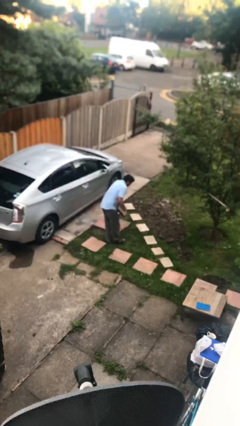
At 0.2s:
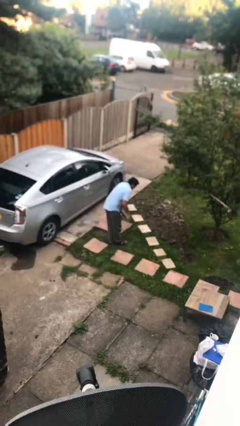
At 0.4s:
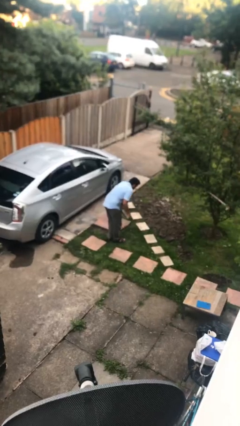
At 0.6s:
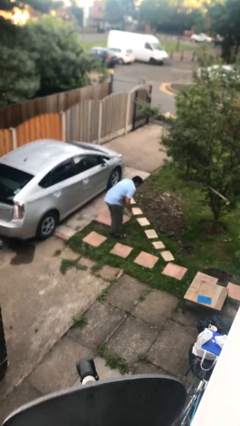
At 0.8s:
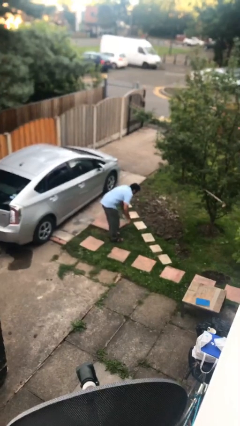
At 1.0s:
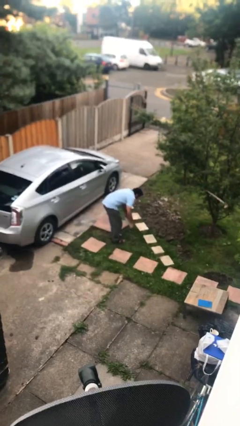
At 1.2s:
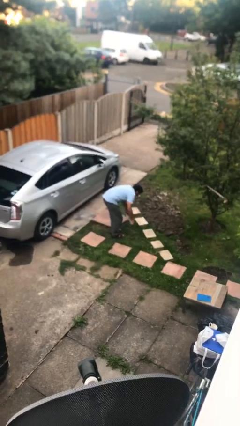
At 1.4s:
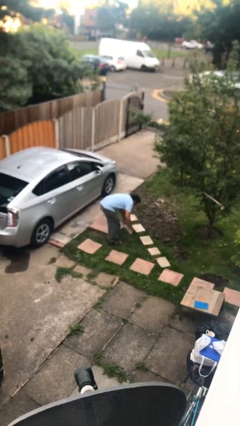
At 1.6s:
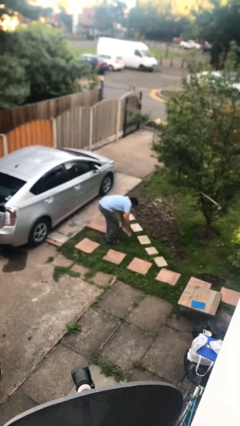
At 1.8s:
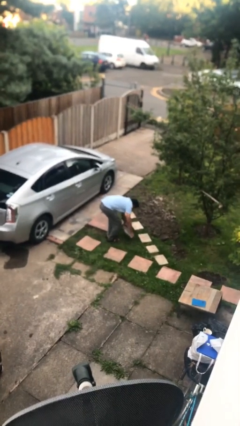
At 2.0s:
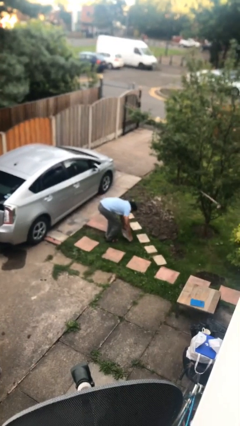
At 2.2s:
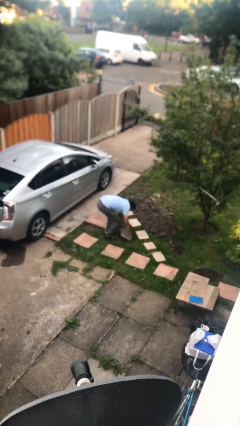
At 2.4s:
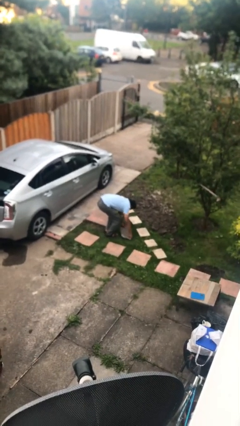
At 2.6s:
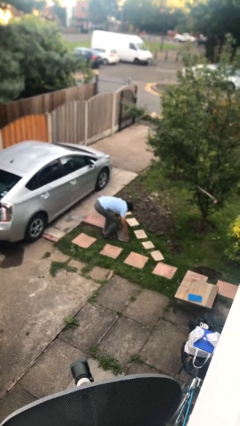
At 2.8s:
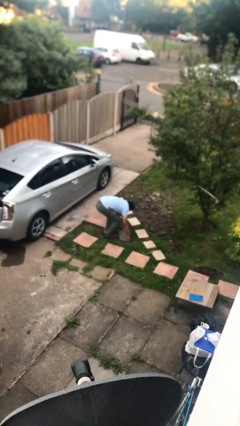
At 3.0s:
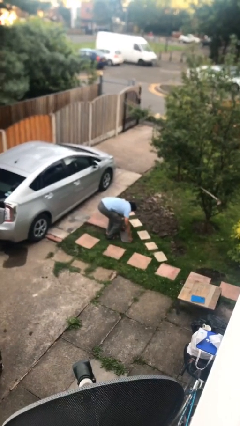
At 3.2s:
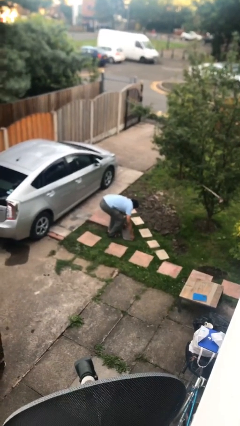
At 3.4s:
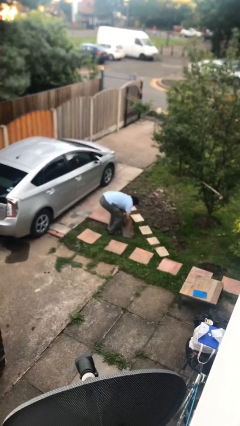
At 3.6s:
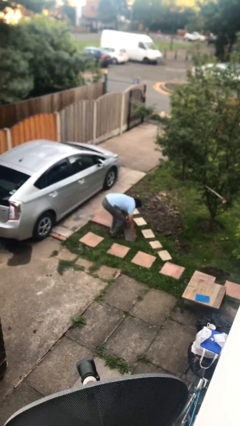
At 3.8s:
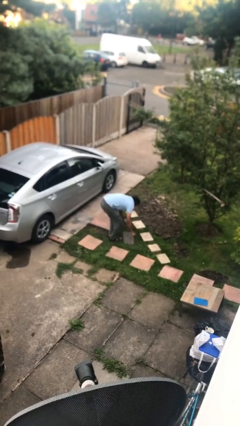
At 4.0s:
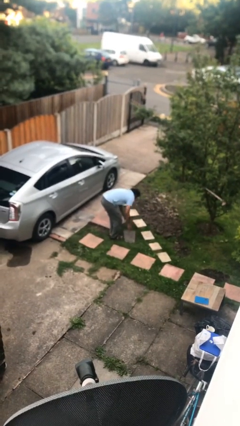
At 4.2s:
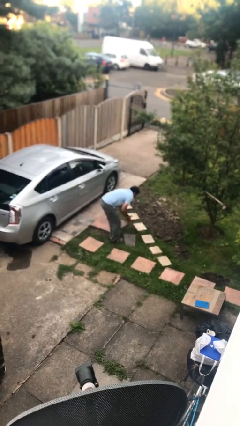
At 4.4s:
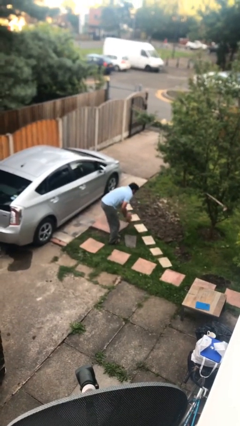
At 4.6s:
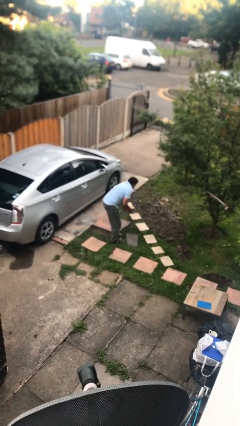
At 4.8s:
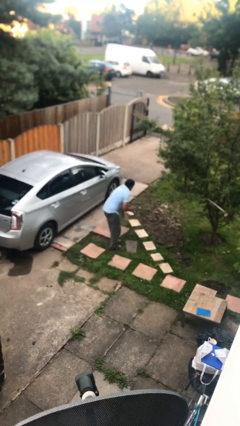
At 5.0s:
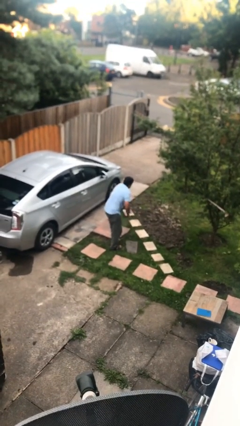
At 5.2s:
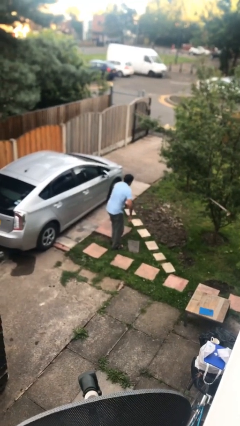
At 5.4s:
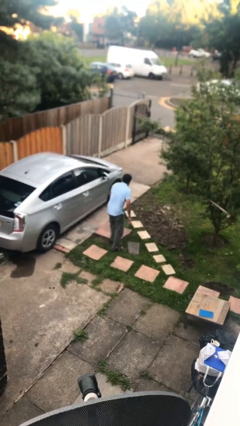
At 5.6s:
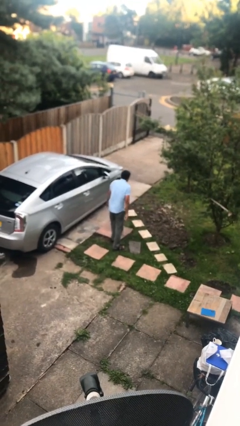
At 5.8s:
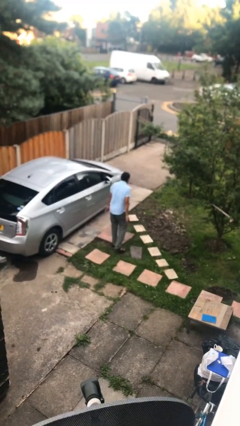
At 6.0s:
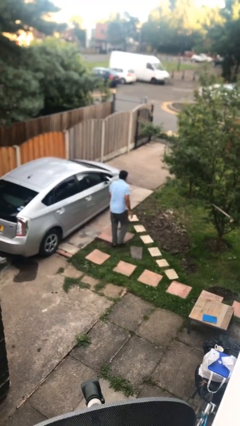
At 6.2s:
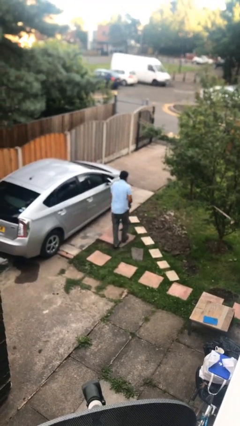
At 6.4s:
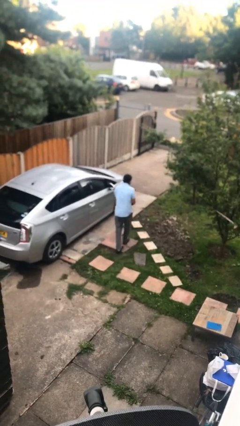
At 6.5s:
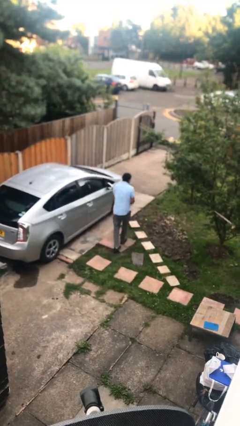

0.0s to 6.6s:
person puts down object on floor

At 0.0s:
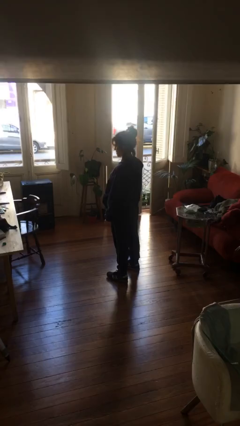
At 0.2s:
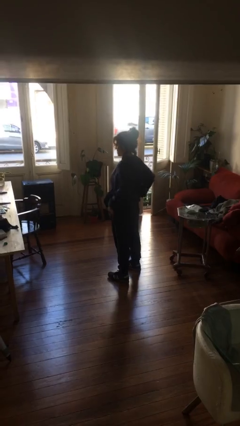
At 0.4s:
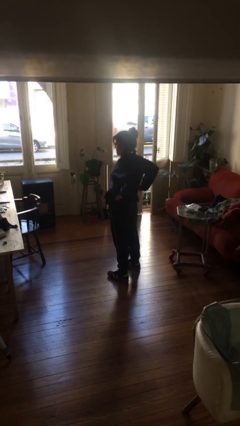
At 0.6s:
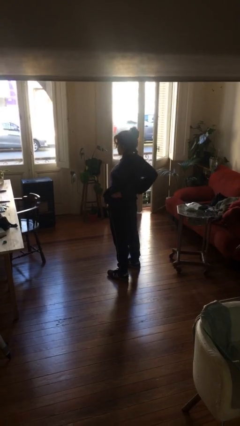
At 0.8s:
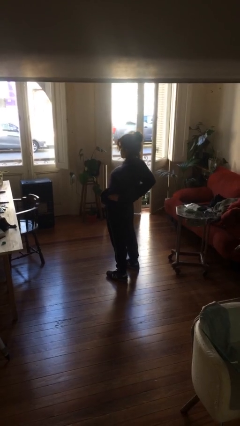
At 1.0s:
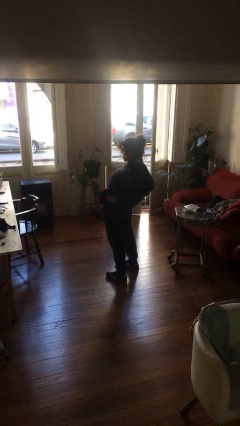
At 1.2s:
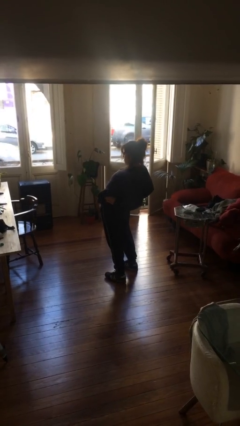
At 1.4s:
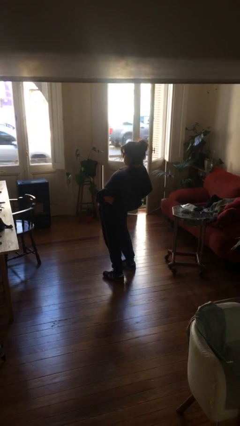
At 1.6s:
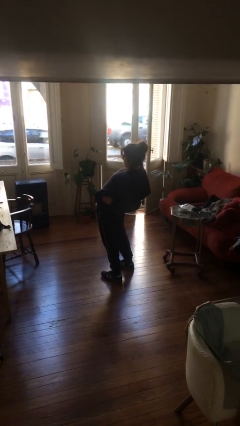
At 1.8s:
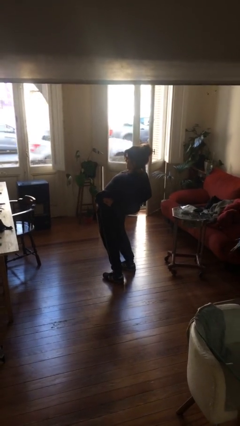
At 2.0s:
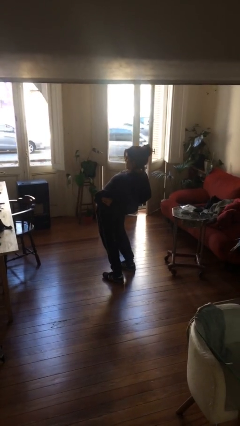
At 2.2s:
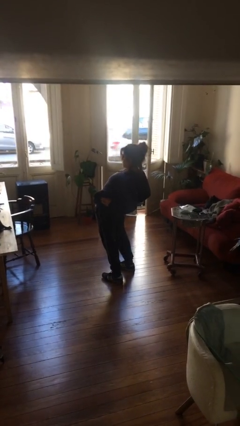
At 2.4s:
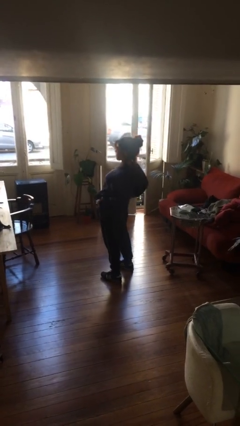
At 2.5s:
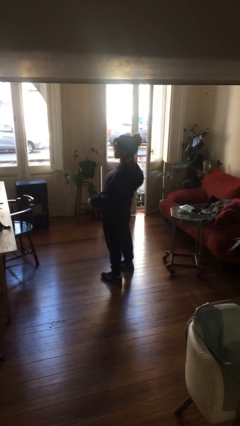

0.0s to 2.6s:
person stretches back

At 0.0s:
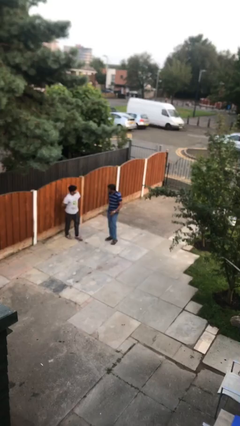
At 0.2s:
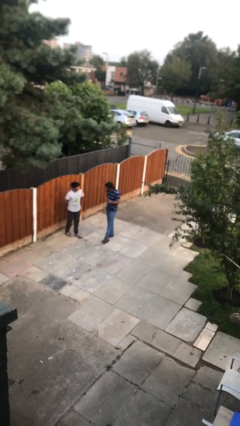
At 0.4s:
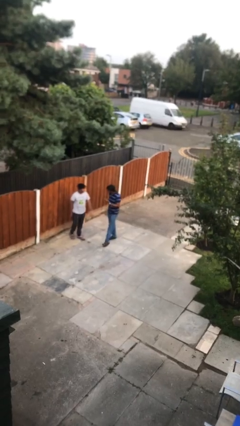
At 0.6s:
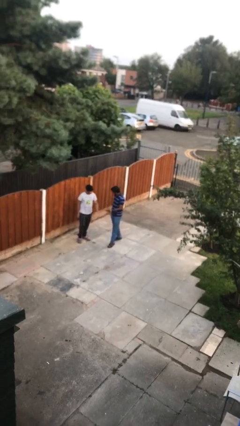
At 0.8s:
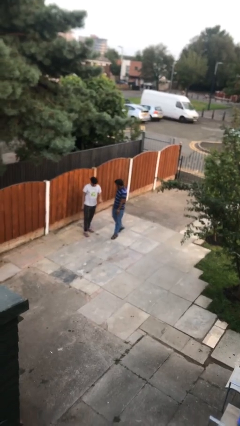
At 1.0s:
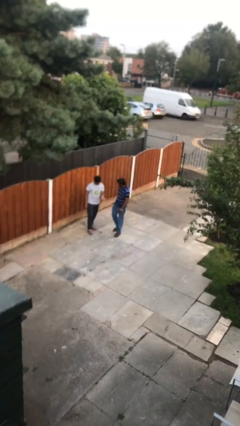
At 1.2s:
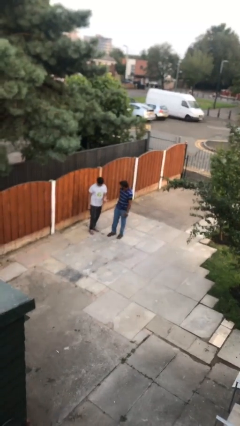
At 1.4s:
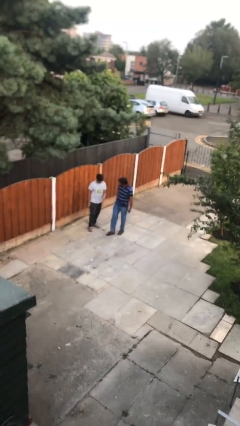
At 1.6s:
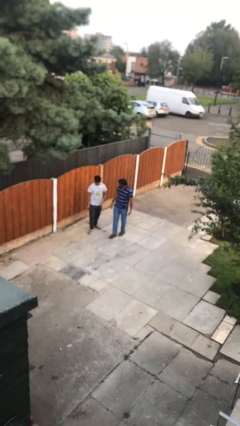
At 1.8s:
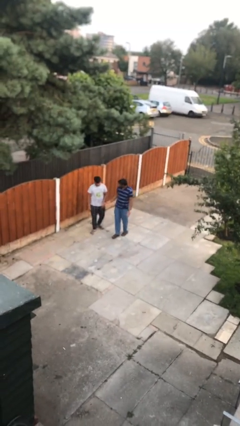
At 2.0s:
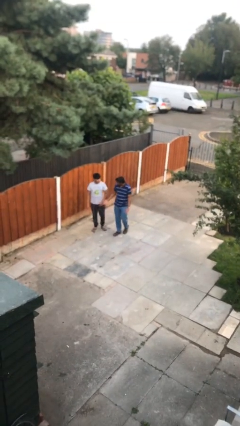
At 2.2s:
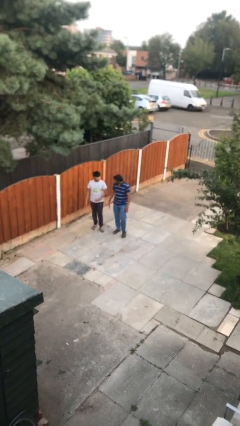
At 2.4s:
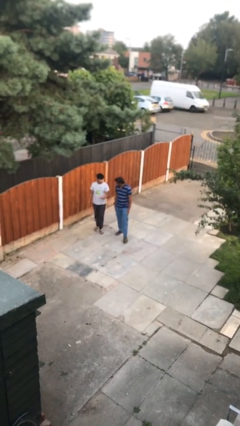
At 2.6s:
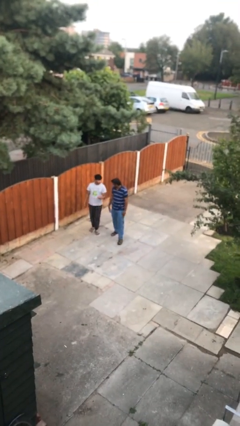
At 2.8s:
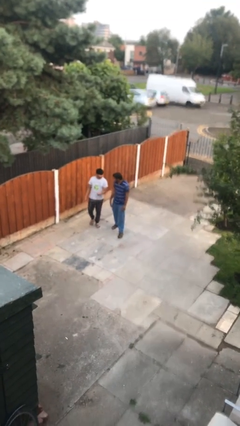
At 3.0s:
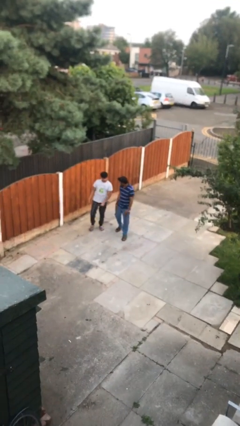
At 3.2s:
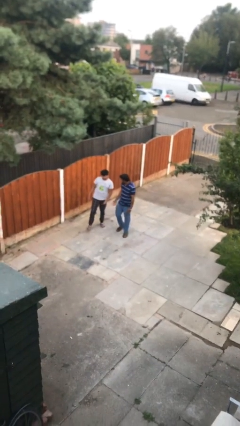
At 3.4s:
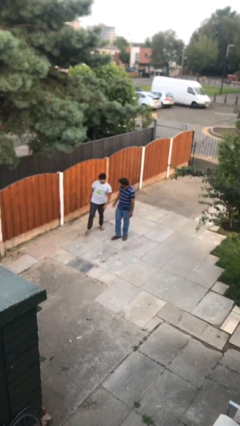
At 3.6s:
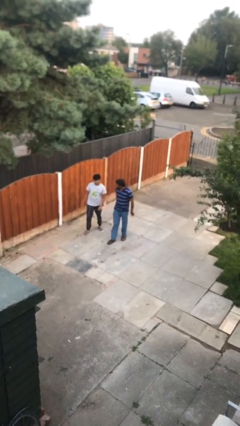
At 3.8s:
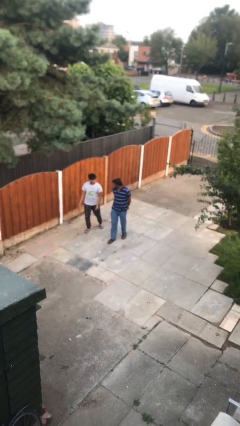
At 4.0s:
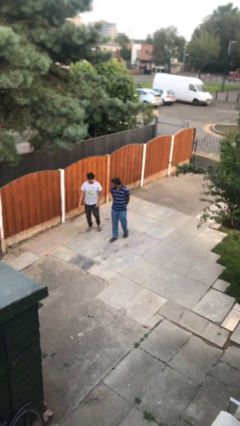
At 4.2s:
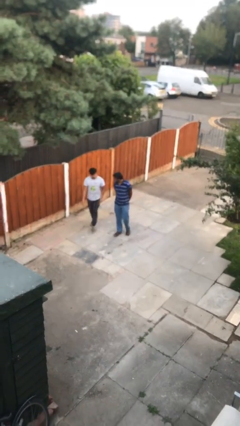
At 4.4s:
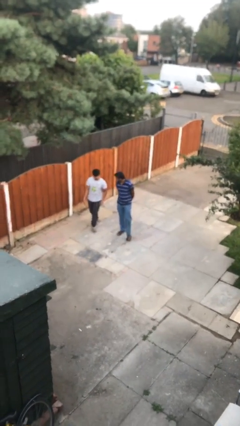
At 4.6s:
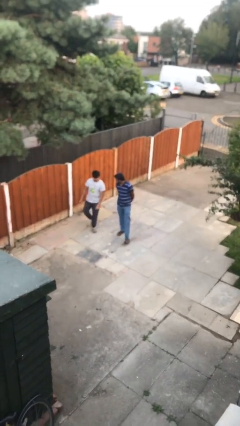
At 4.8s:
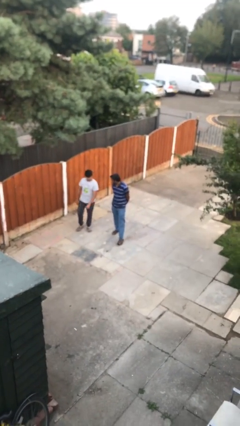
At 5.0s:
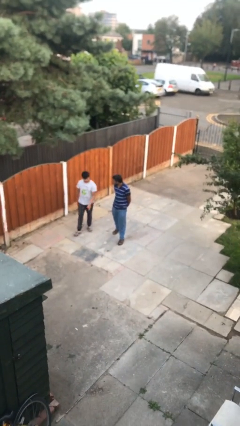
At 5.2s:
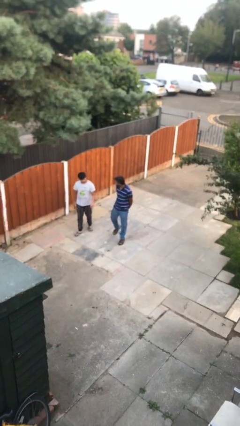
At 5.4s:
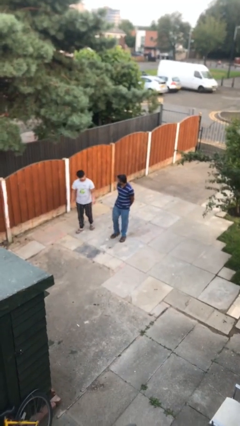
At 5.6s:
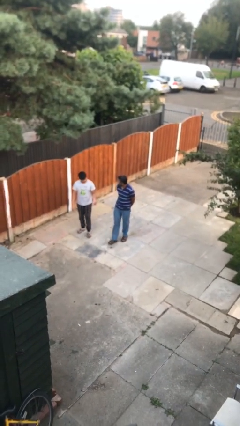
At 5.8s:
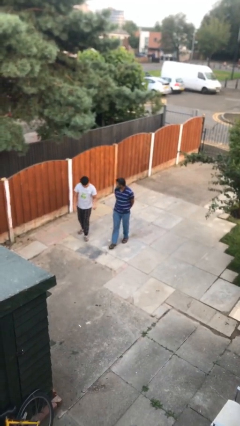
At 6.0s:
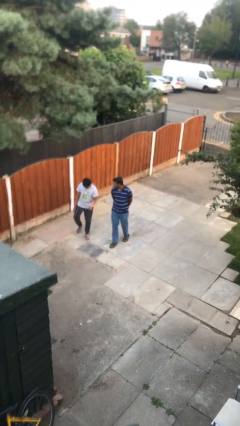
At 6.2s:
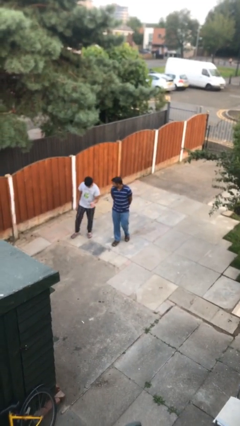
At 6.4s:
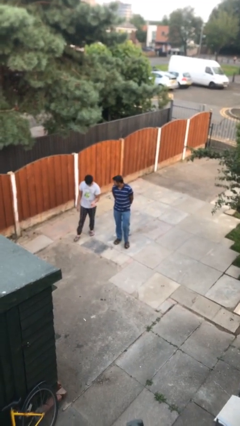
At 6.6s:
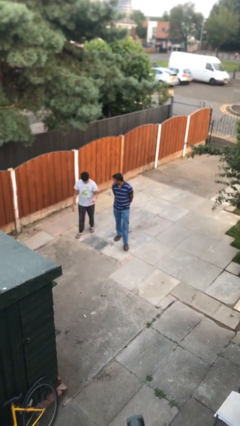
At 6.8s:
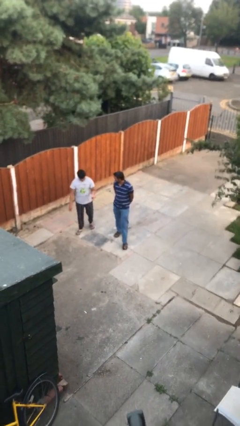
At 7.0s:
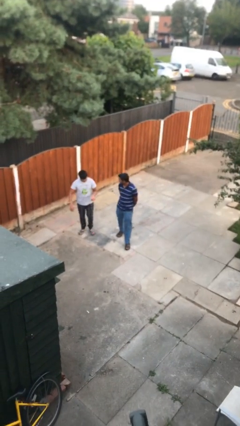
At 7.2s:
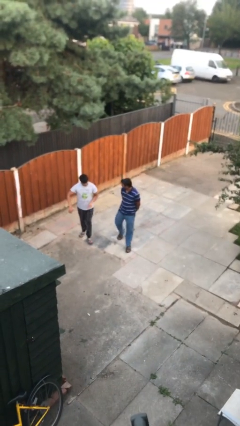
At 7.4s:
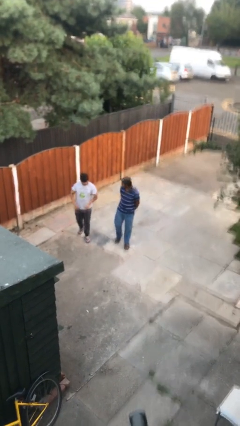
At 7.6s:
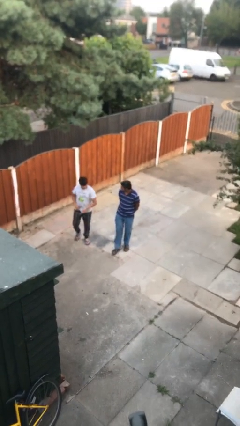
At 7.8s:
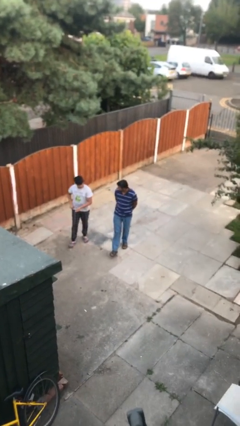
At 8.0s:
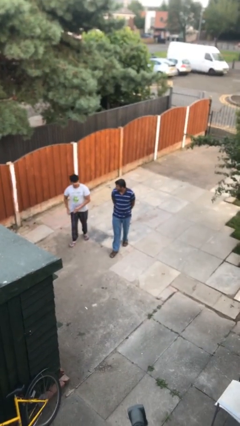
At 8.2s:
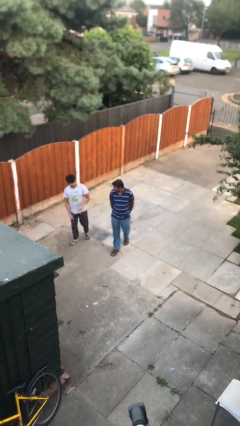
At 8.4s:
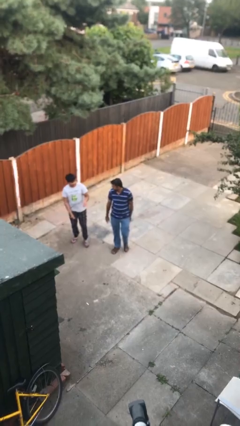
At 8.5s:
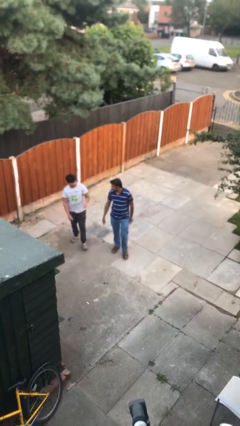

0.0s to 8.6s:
person talks to person

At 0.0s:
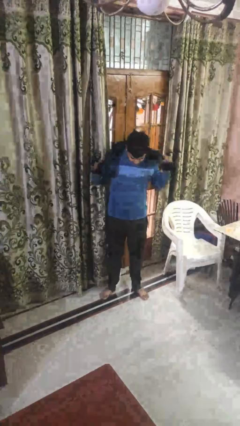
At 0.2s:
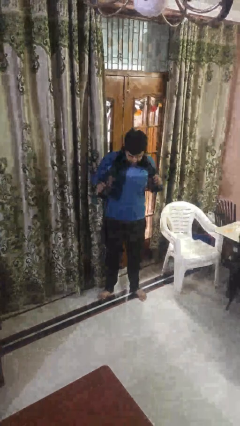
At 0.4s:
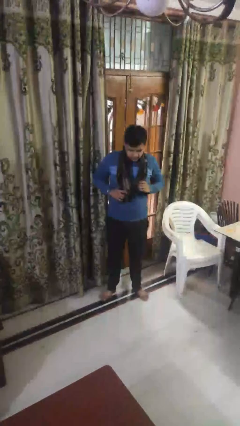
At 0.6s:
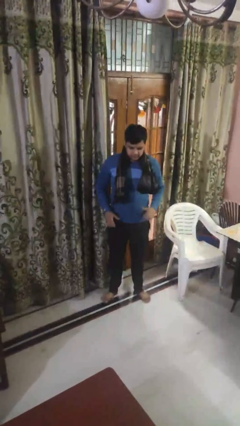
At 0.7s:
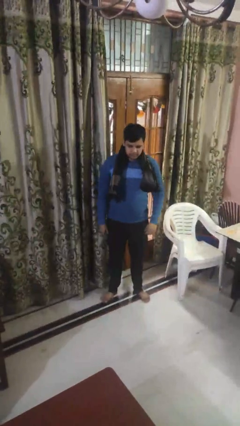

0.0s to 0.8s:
person puts on scarf
